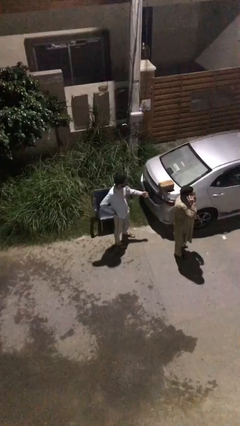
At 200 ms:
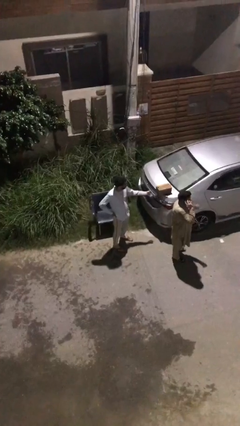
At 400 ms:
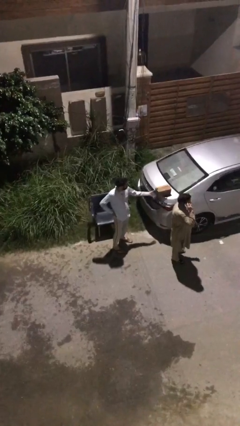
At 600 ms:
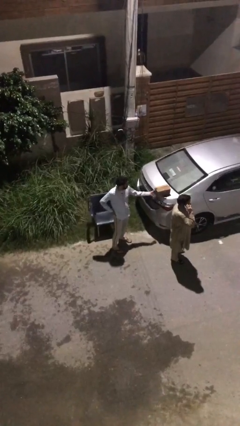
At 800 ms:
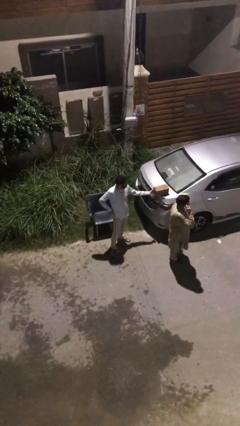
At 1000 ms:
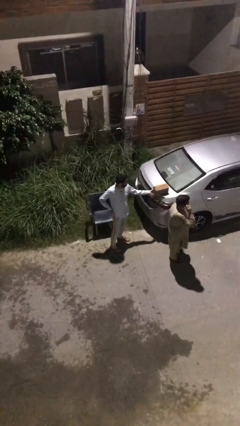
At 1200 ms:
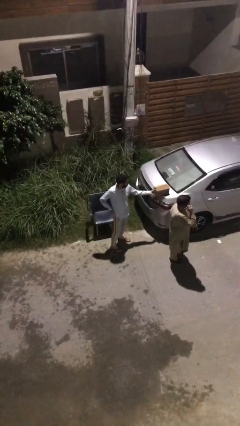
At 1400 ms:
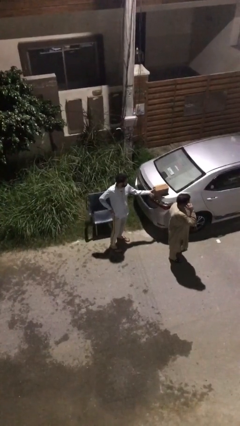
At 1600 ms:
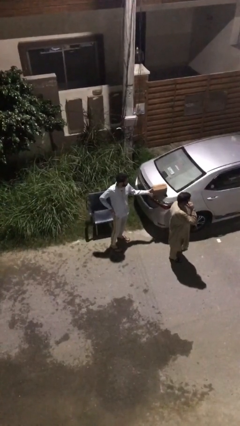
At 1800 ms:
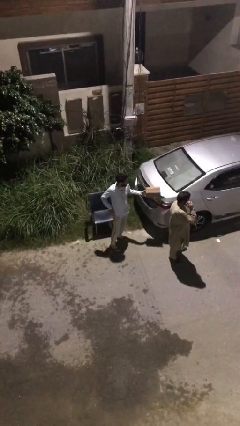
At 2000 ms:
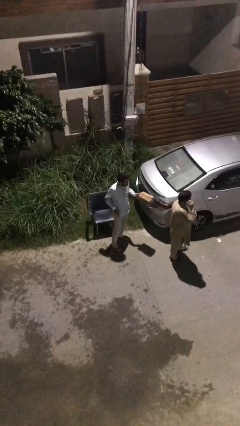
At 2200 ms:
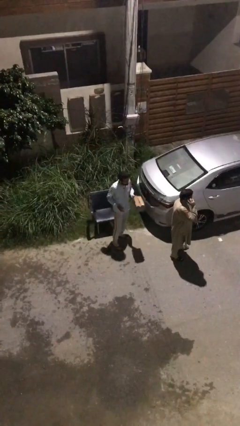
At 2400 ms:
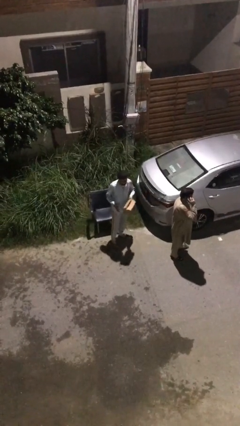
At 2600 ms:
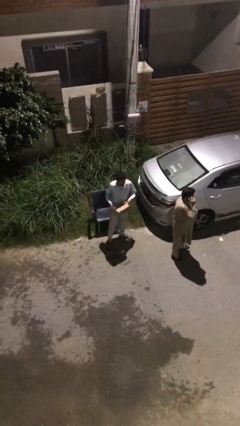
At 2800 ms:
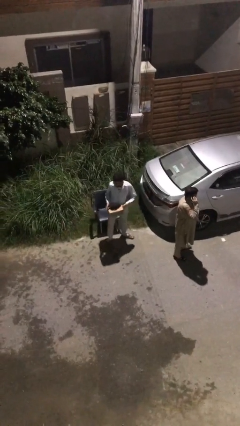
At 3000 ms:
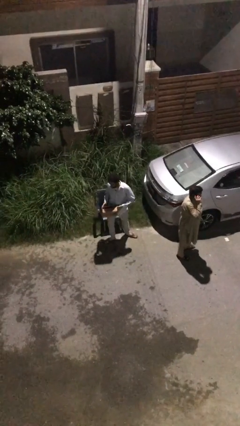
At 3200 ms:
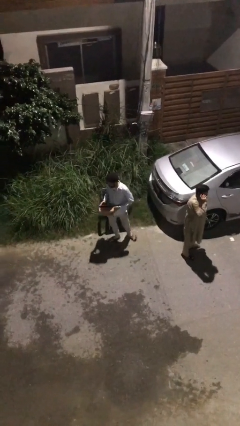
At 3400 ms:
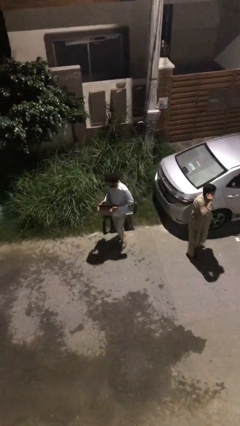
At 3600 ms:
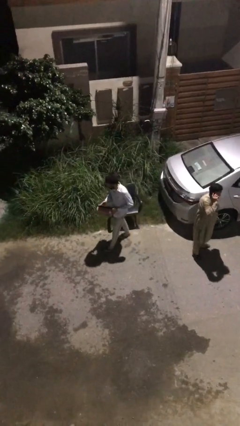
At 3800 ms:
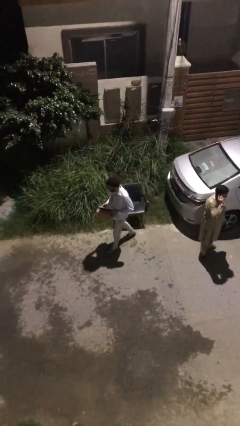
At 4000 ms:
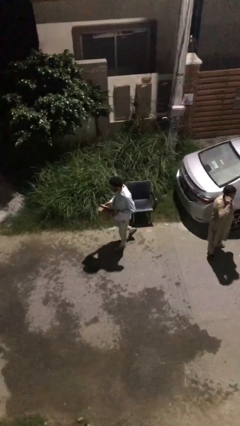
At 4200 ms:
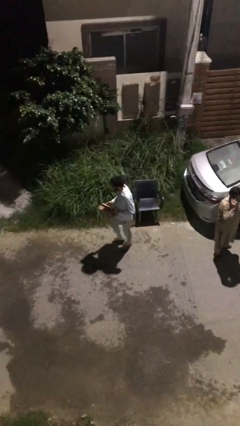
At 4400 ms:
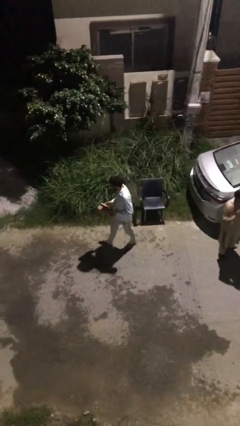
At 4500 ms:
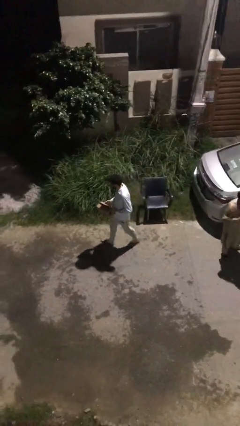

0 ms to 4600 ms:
person steals object from person

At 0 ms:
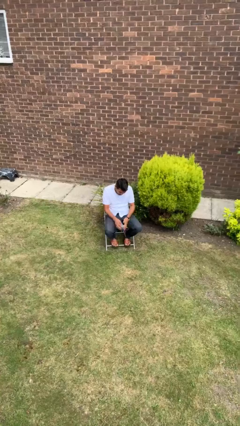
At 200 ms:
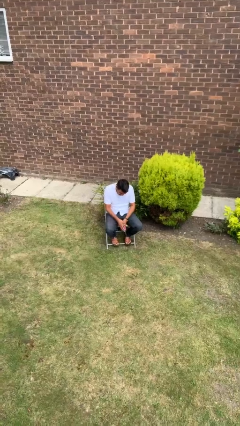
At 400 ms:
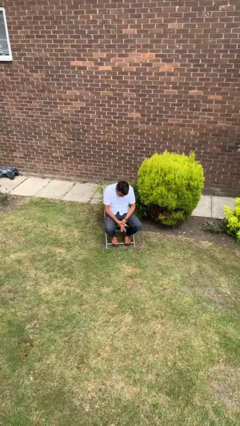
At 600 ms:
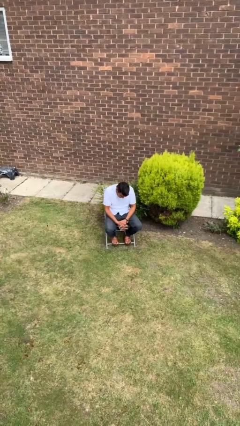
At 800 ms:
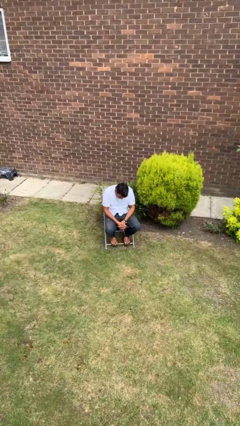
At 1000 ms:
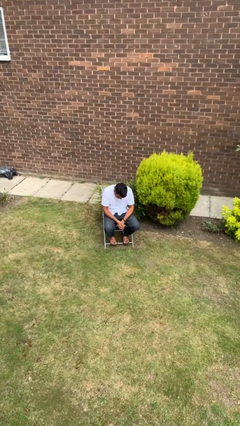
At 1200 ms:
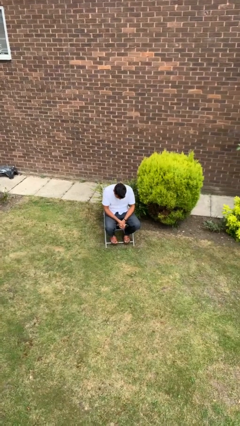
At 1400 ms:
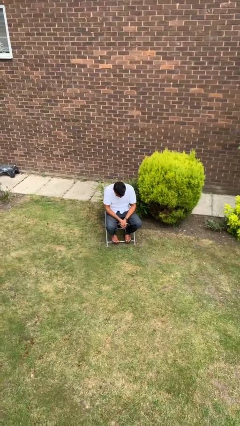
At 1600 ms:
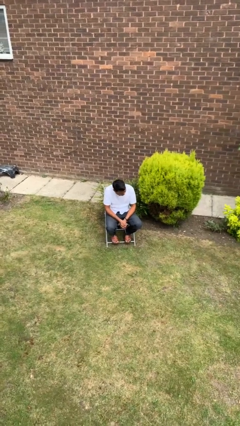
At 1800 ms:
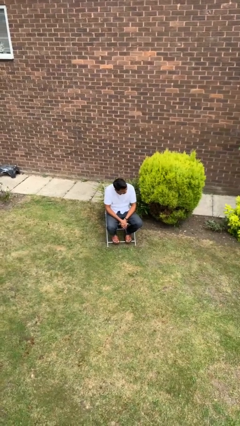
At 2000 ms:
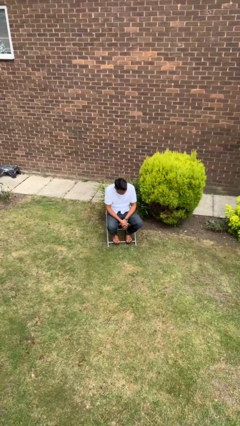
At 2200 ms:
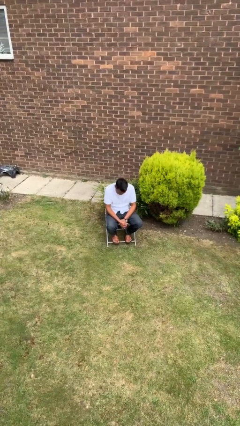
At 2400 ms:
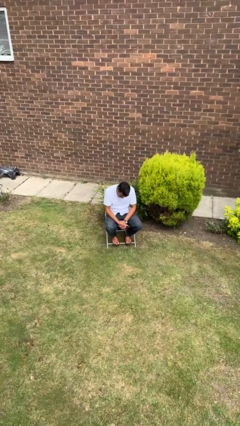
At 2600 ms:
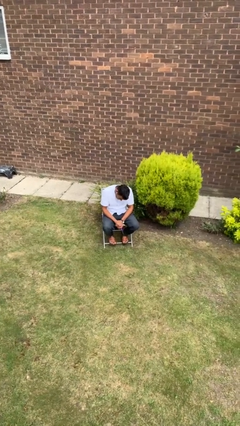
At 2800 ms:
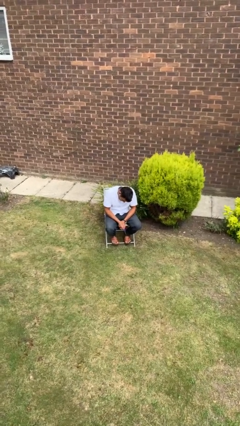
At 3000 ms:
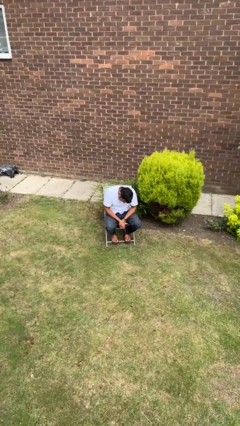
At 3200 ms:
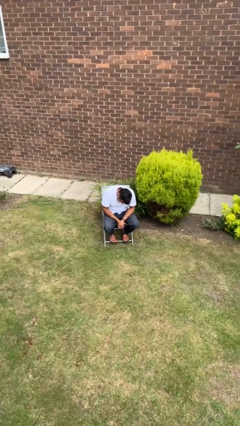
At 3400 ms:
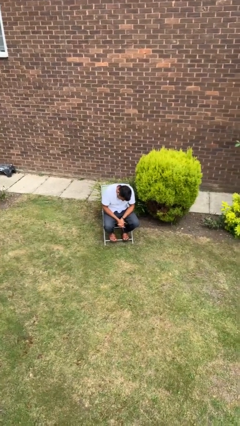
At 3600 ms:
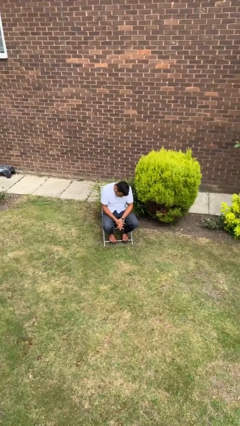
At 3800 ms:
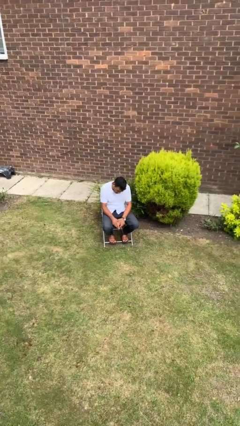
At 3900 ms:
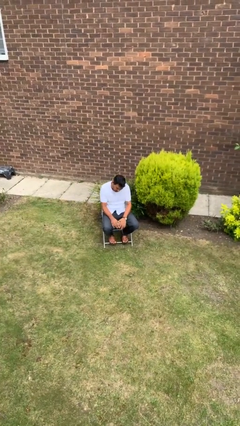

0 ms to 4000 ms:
person looks at hands in lap

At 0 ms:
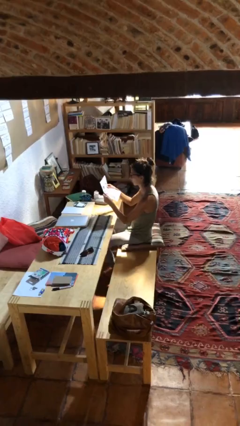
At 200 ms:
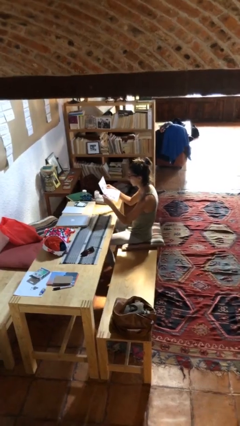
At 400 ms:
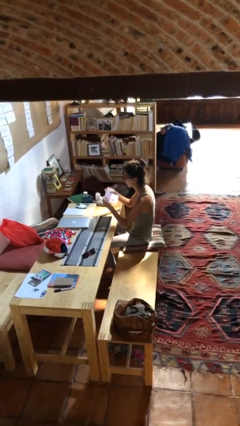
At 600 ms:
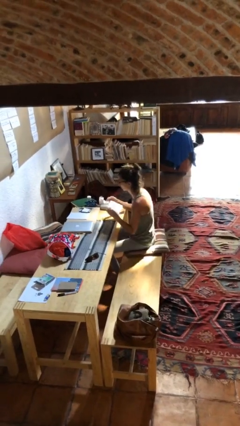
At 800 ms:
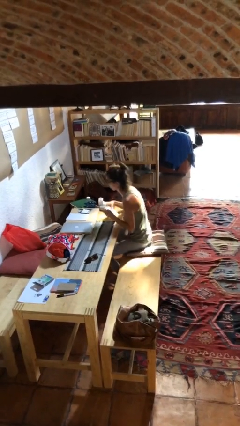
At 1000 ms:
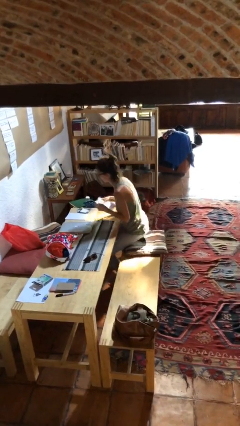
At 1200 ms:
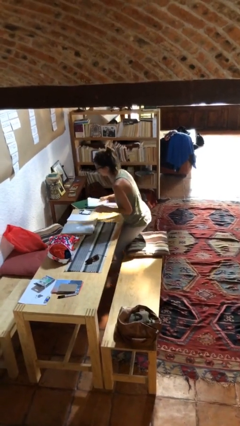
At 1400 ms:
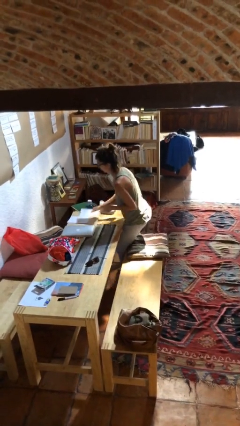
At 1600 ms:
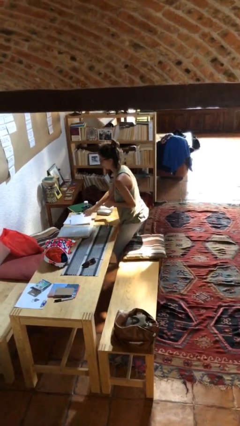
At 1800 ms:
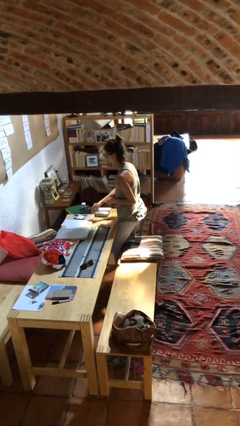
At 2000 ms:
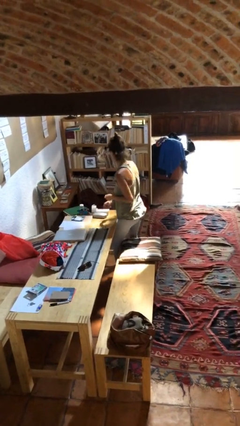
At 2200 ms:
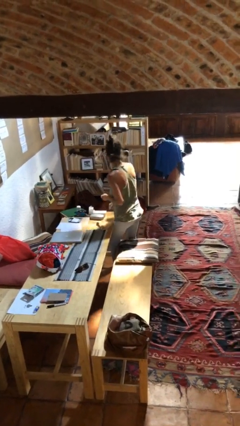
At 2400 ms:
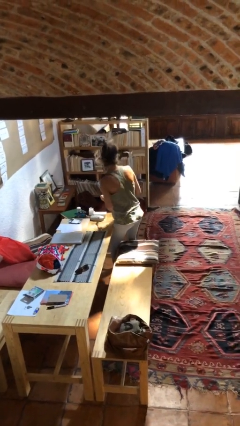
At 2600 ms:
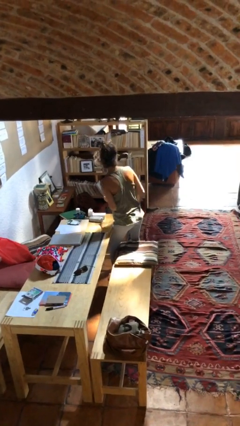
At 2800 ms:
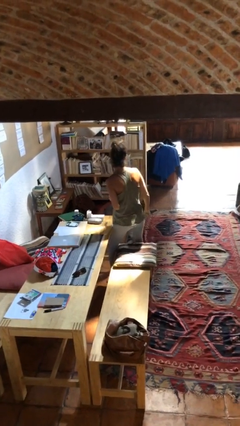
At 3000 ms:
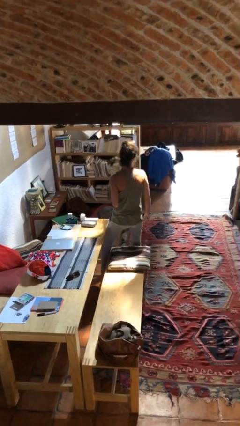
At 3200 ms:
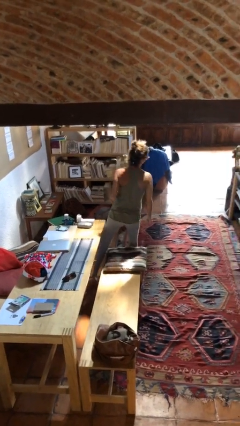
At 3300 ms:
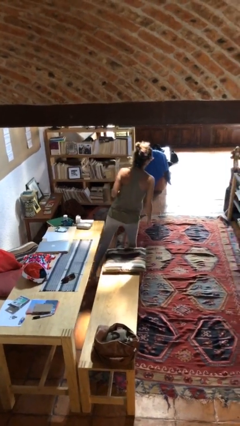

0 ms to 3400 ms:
person stands up

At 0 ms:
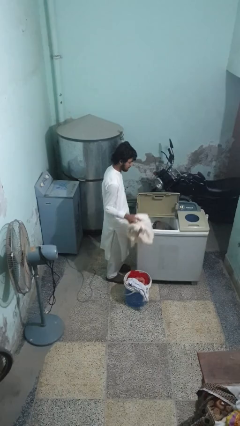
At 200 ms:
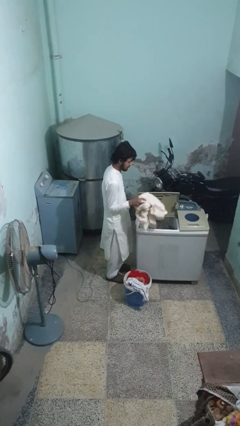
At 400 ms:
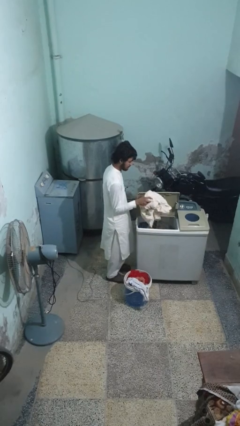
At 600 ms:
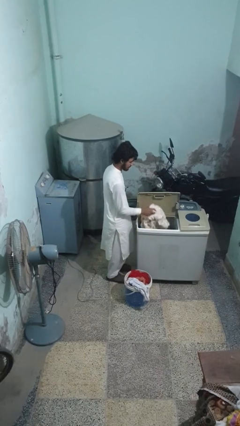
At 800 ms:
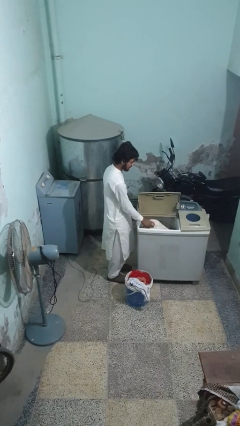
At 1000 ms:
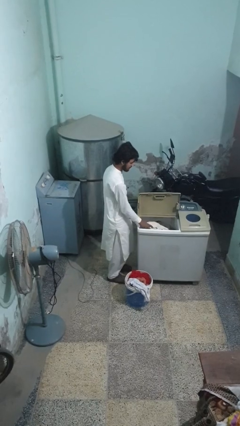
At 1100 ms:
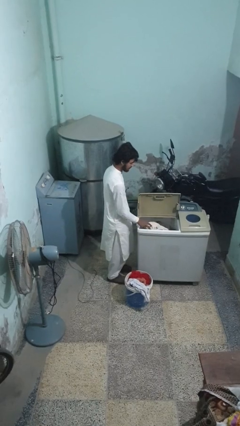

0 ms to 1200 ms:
person loads clotheswasher

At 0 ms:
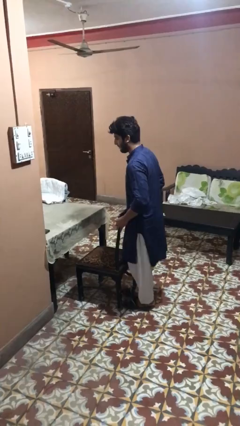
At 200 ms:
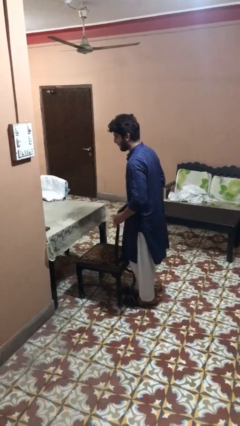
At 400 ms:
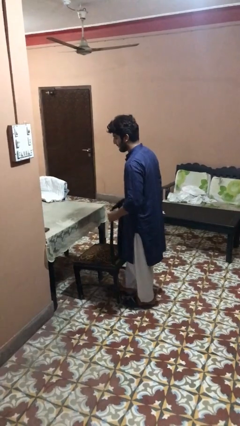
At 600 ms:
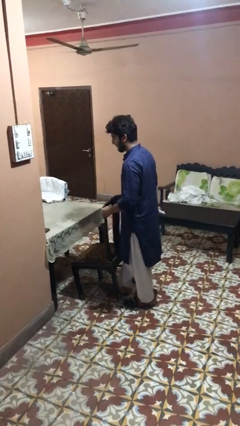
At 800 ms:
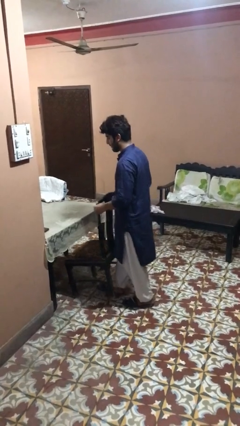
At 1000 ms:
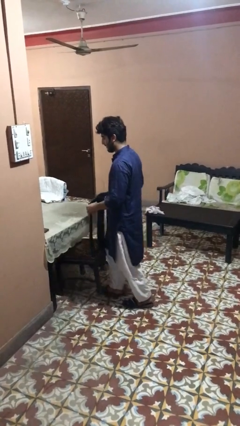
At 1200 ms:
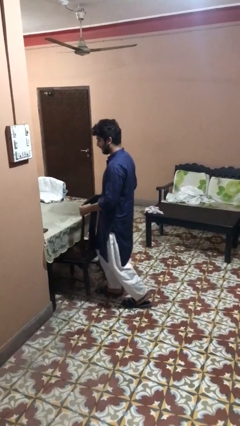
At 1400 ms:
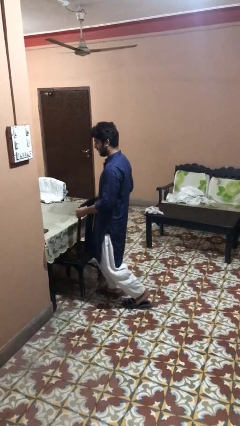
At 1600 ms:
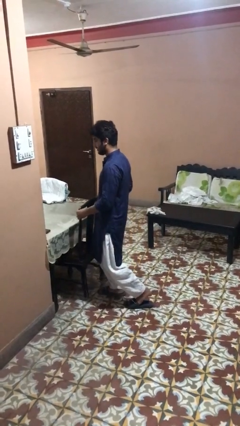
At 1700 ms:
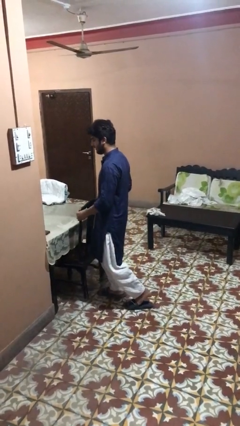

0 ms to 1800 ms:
person pushes in chair

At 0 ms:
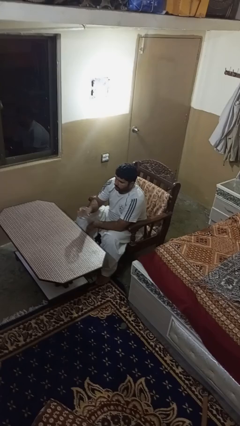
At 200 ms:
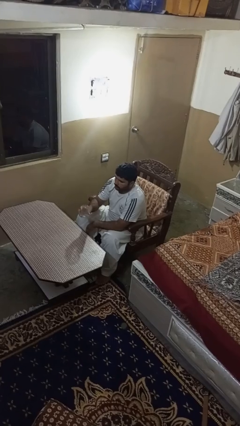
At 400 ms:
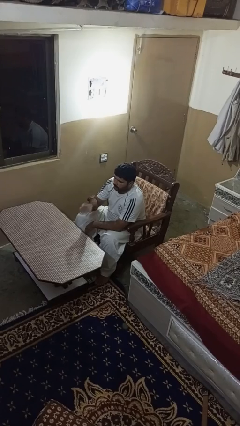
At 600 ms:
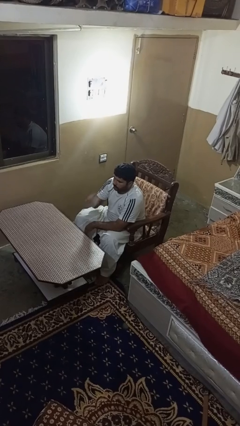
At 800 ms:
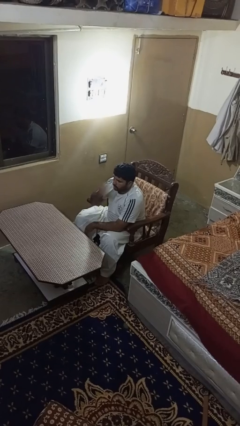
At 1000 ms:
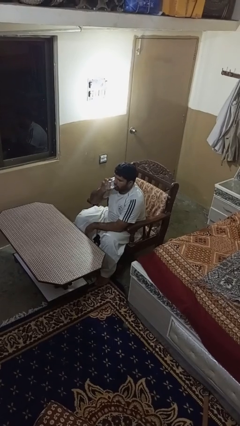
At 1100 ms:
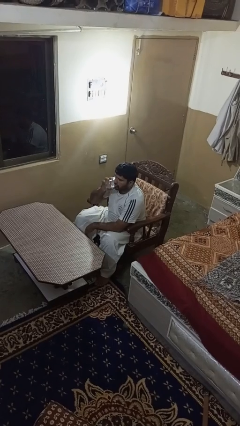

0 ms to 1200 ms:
person drinks from shotglass

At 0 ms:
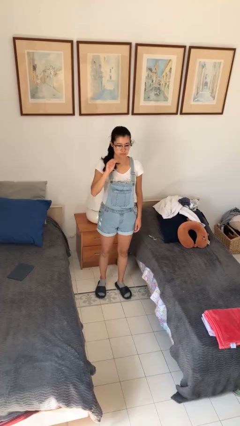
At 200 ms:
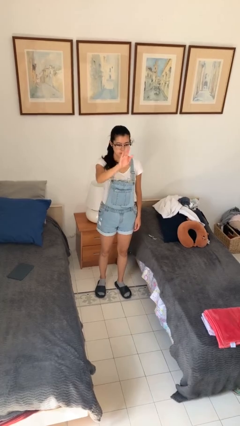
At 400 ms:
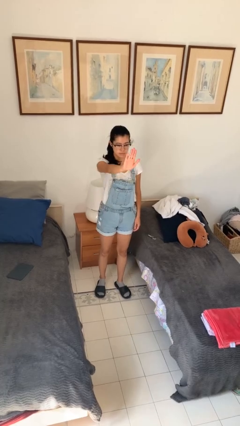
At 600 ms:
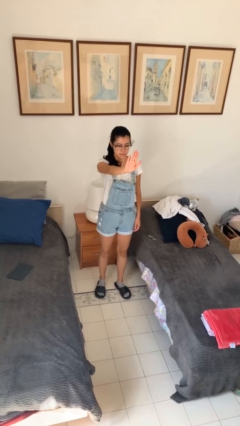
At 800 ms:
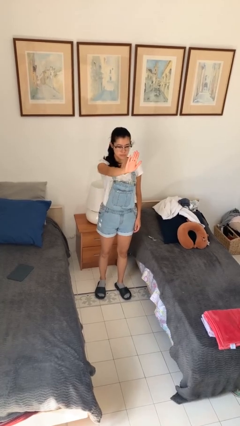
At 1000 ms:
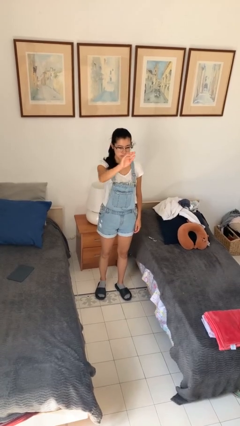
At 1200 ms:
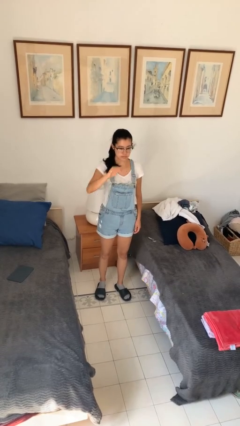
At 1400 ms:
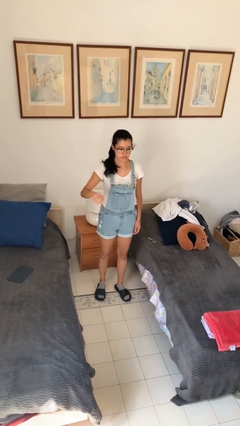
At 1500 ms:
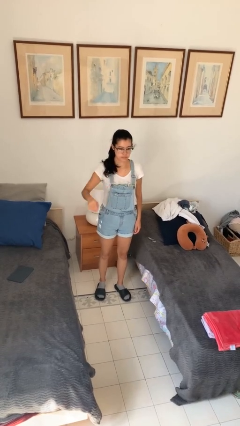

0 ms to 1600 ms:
person gestures stop
